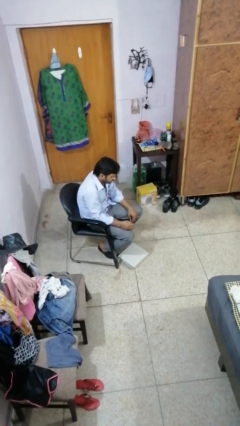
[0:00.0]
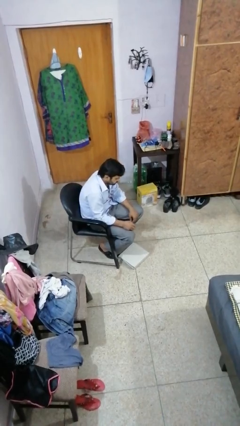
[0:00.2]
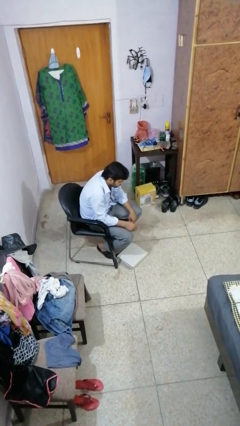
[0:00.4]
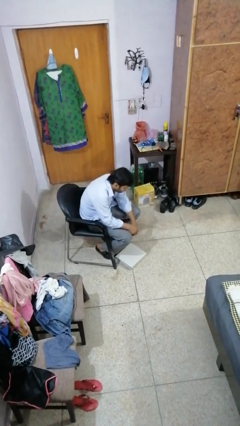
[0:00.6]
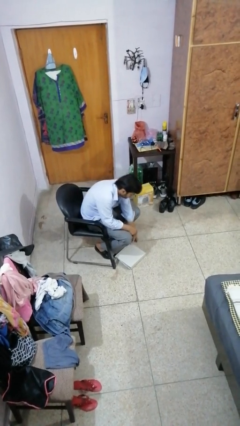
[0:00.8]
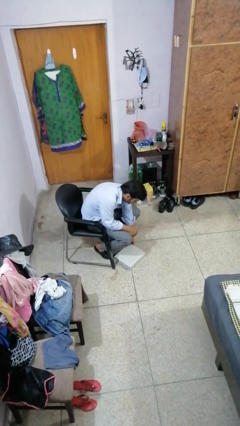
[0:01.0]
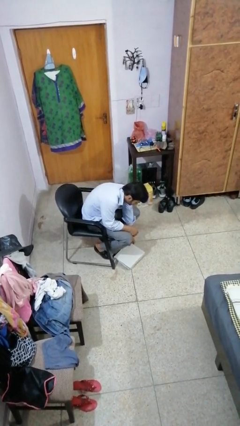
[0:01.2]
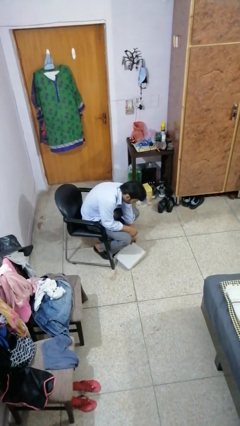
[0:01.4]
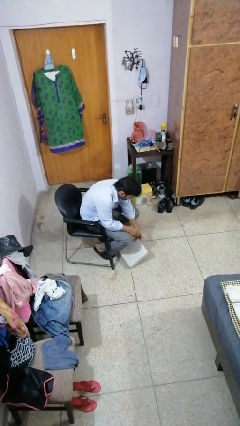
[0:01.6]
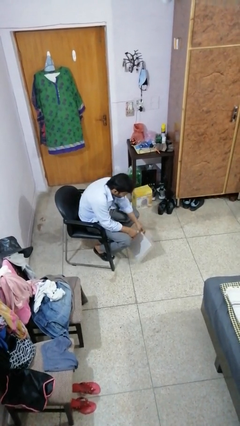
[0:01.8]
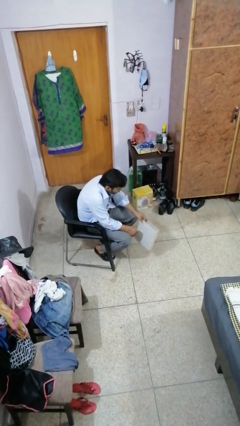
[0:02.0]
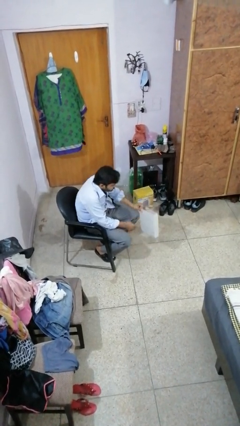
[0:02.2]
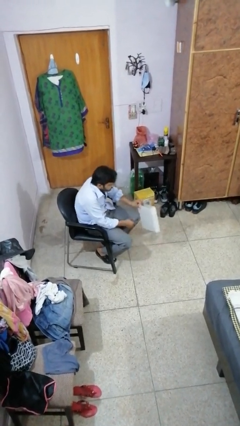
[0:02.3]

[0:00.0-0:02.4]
person picks up object from floor

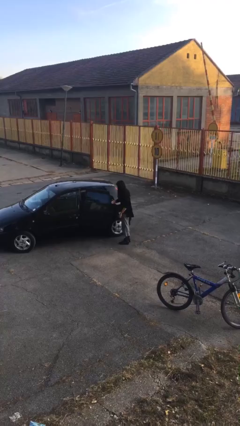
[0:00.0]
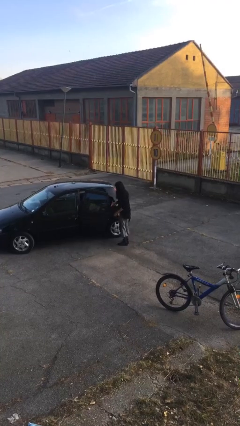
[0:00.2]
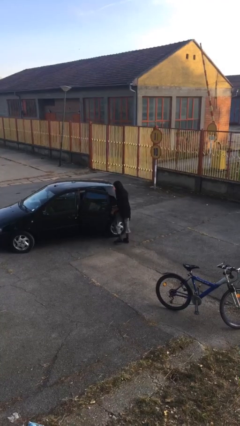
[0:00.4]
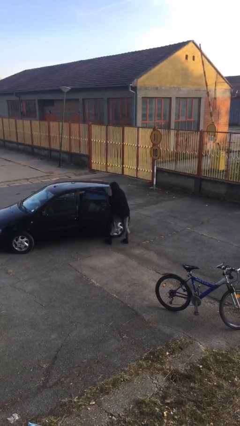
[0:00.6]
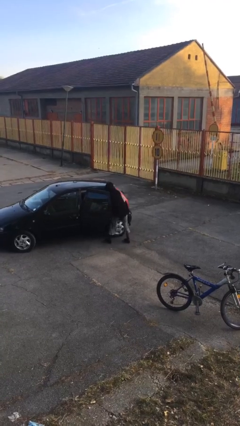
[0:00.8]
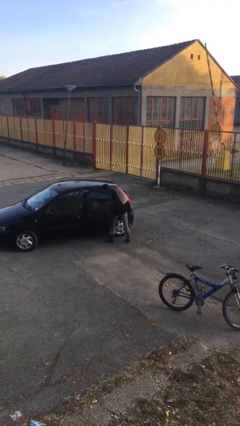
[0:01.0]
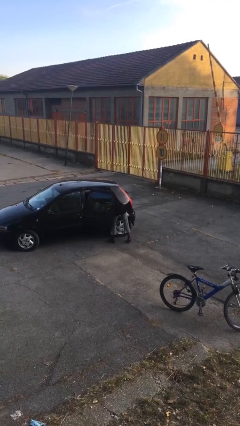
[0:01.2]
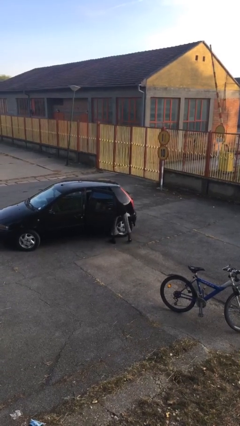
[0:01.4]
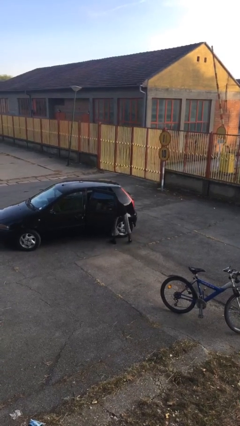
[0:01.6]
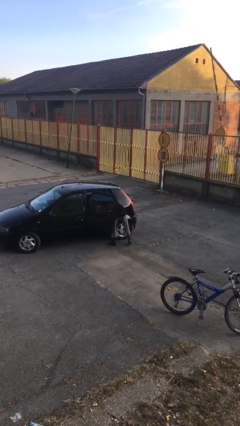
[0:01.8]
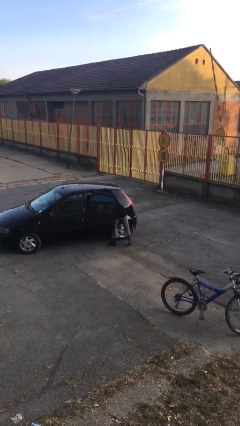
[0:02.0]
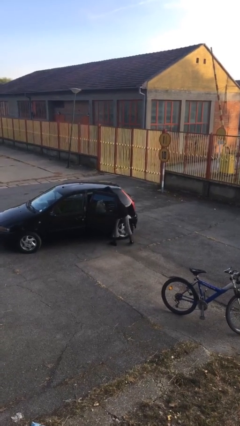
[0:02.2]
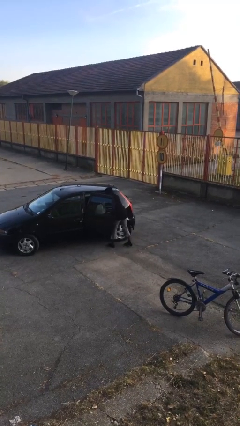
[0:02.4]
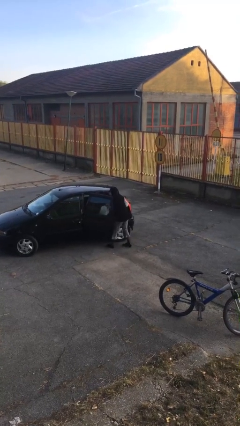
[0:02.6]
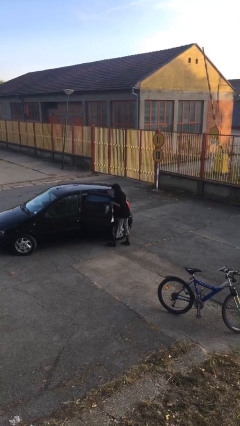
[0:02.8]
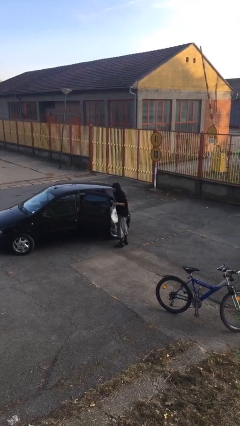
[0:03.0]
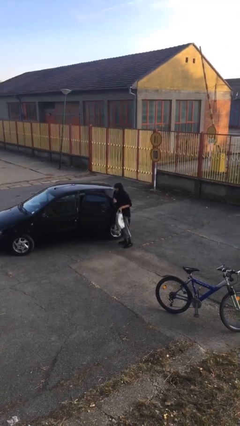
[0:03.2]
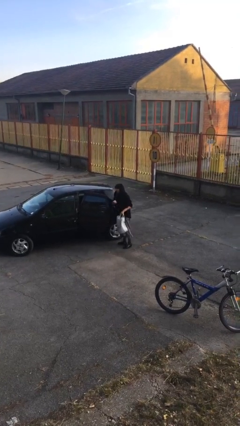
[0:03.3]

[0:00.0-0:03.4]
person unloads car

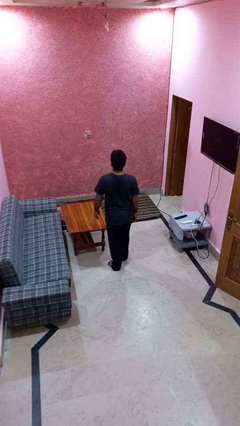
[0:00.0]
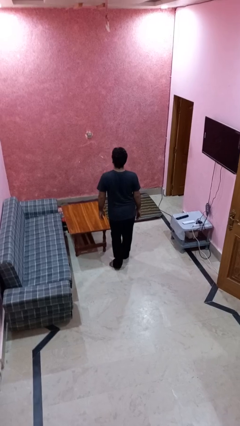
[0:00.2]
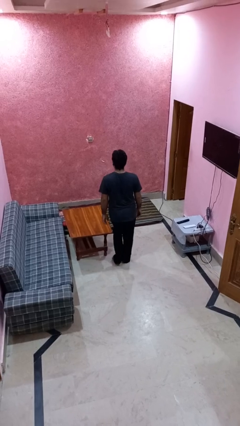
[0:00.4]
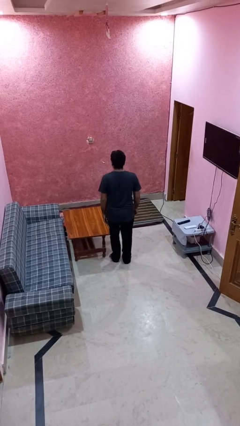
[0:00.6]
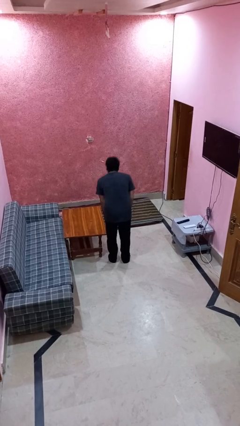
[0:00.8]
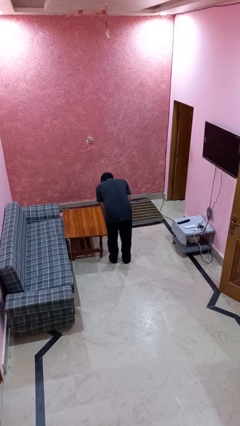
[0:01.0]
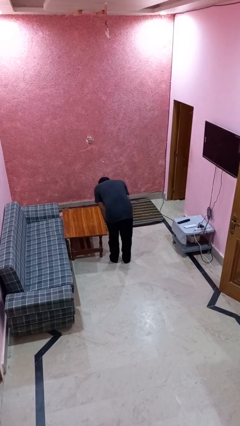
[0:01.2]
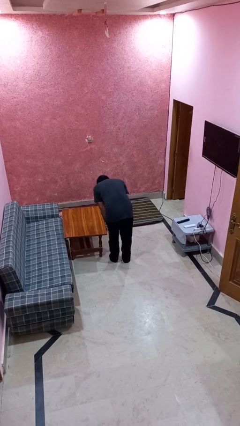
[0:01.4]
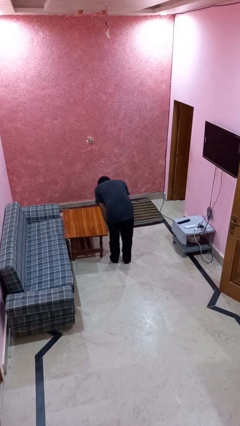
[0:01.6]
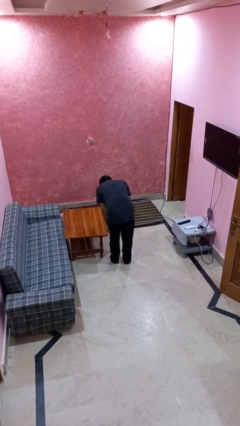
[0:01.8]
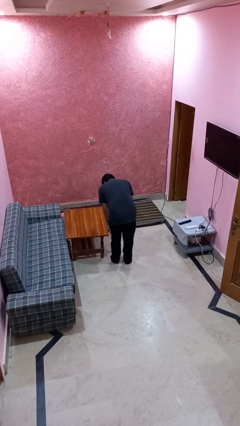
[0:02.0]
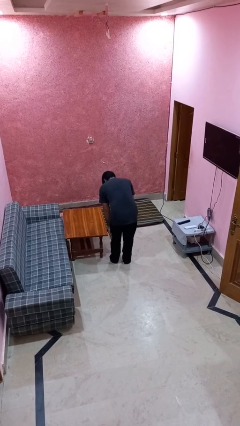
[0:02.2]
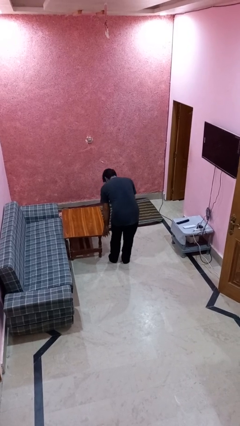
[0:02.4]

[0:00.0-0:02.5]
person bumps into table

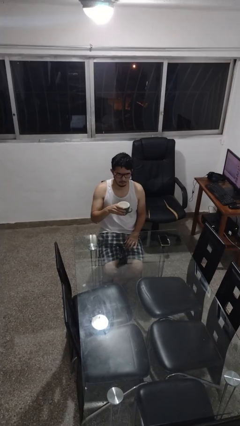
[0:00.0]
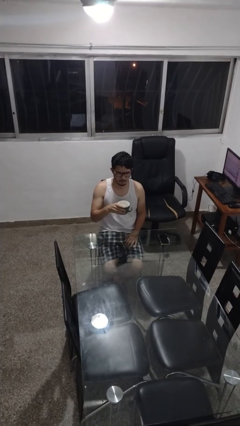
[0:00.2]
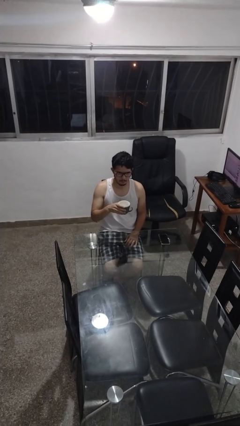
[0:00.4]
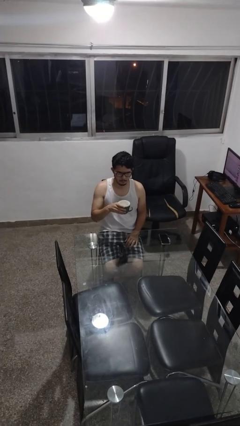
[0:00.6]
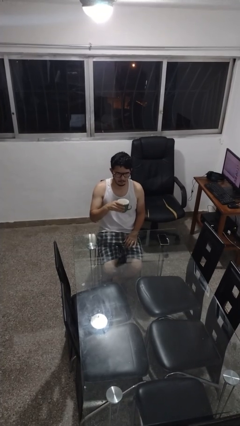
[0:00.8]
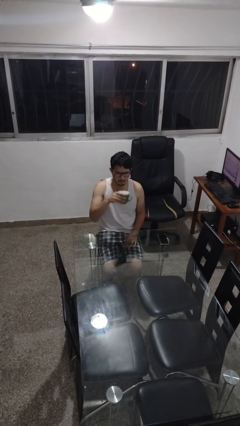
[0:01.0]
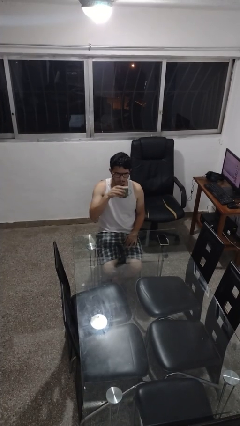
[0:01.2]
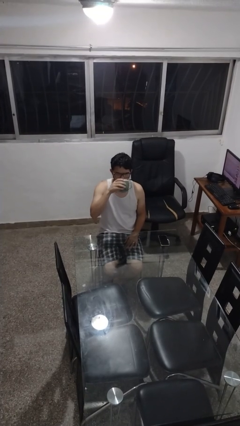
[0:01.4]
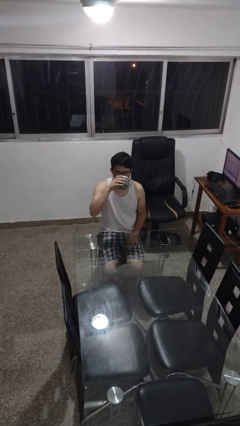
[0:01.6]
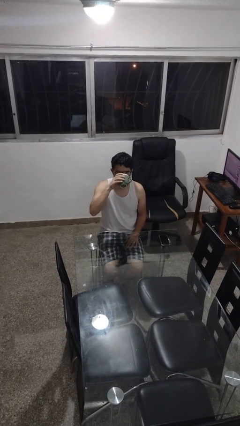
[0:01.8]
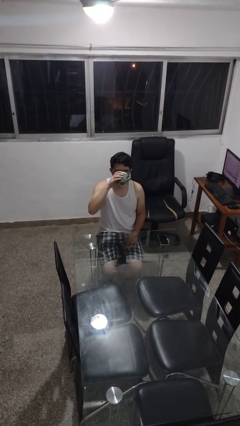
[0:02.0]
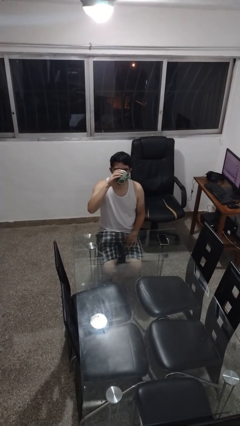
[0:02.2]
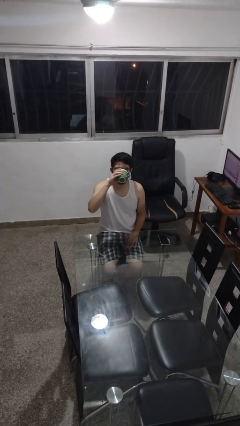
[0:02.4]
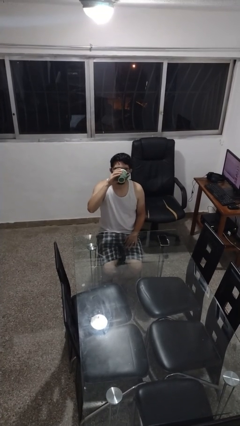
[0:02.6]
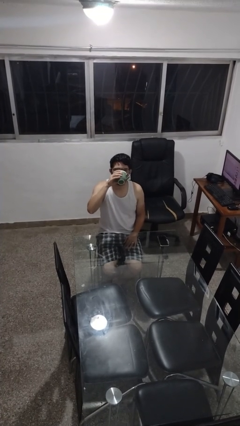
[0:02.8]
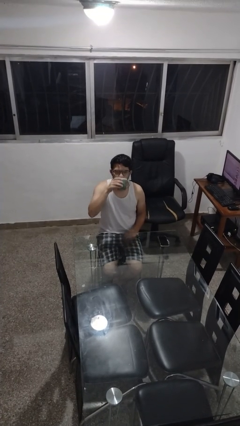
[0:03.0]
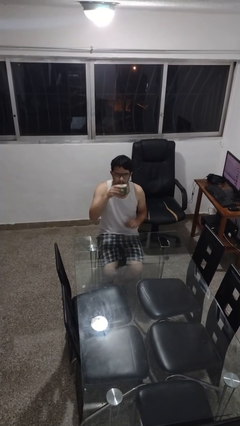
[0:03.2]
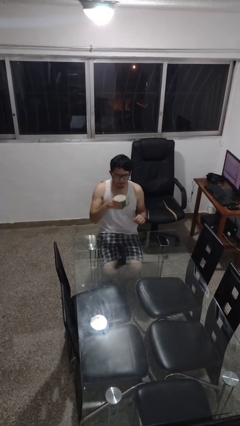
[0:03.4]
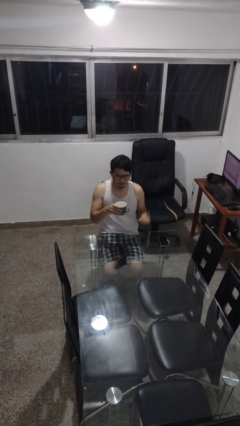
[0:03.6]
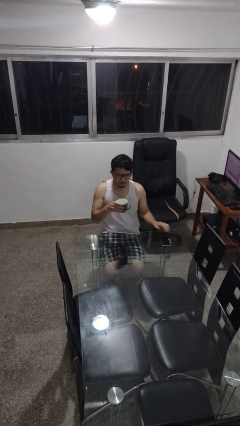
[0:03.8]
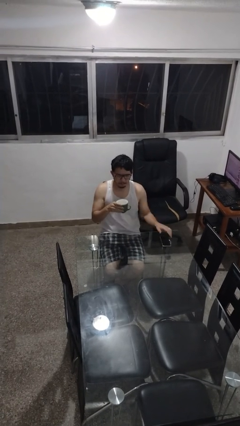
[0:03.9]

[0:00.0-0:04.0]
person drinks from mug

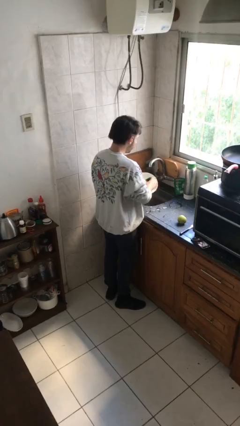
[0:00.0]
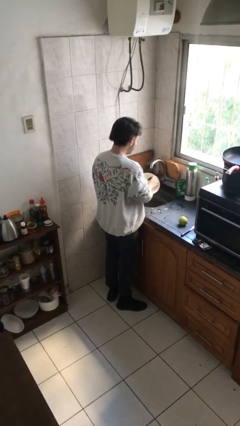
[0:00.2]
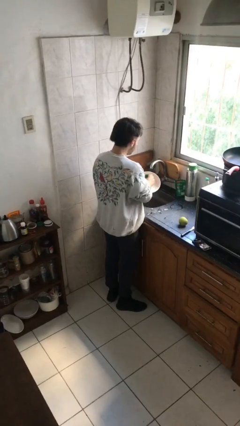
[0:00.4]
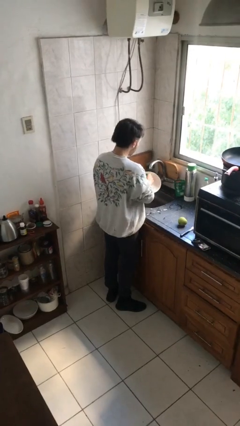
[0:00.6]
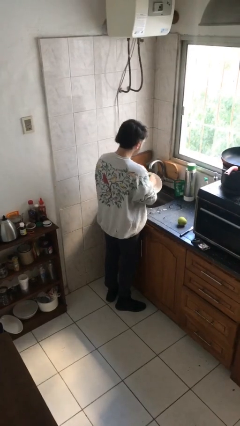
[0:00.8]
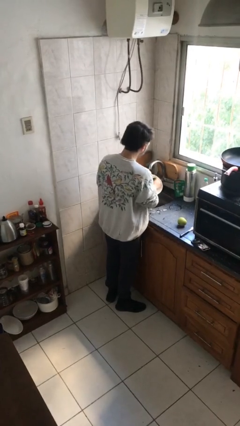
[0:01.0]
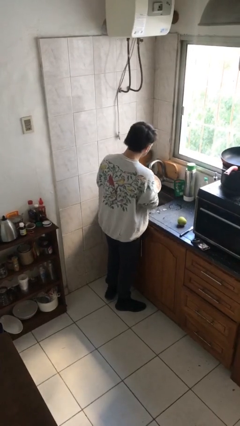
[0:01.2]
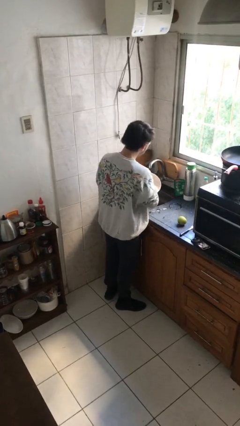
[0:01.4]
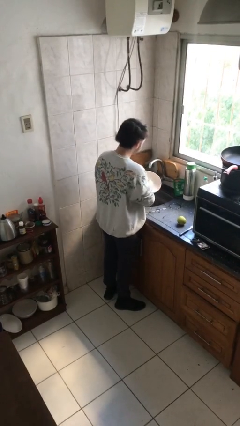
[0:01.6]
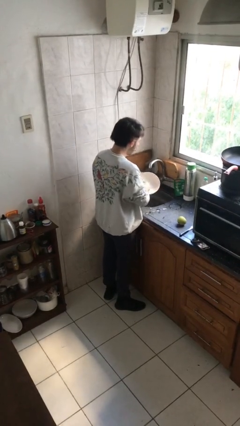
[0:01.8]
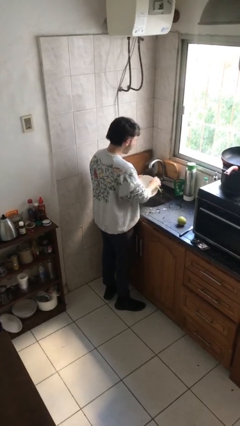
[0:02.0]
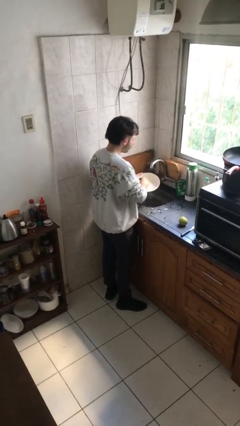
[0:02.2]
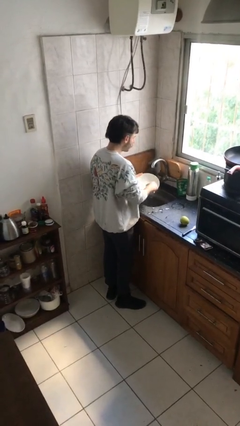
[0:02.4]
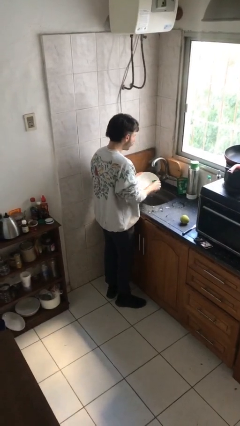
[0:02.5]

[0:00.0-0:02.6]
person washes dish

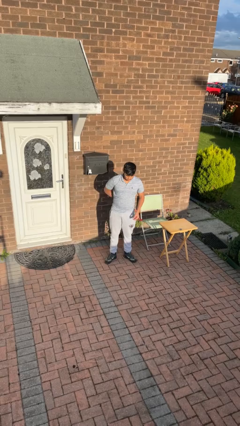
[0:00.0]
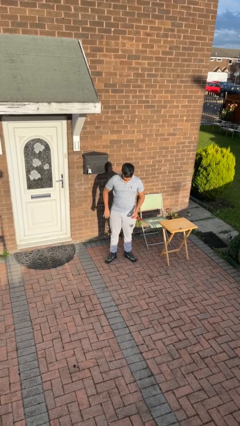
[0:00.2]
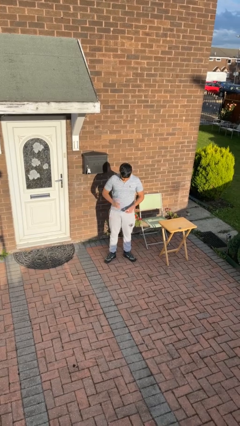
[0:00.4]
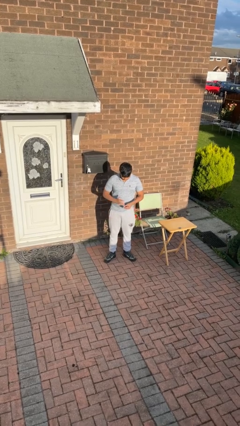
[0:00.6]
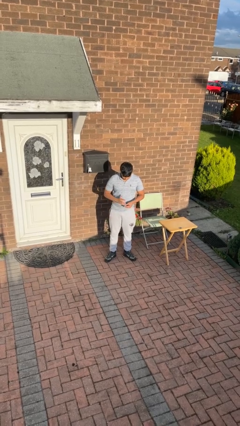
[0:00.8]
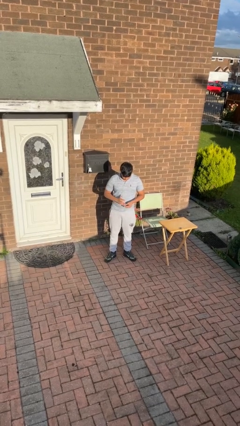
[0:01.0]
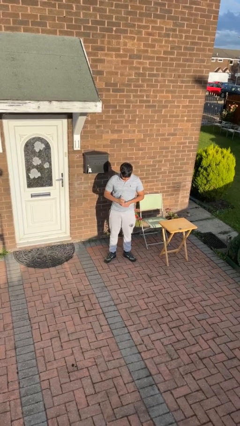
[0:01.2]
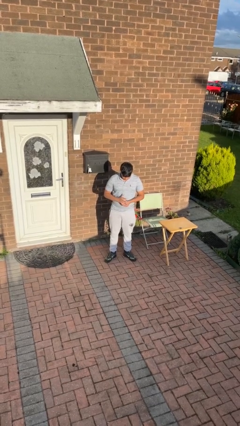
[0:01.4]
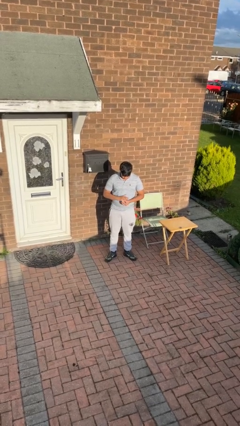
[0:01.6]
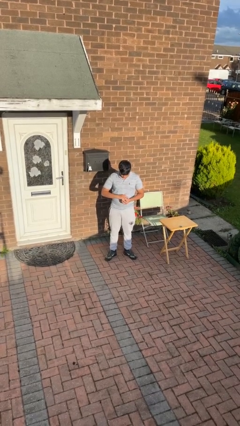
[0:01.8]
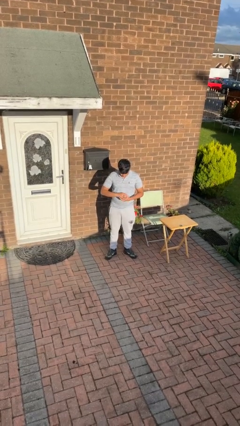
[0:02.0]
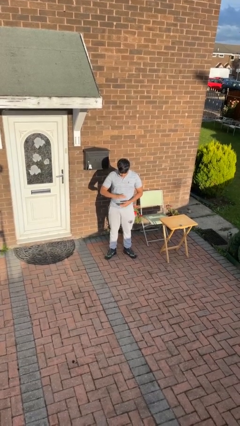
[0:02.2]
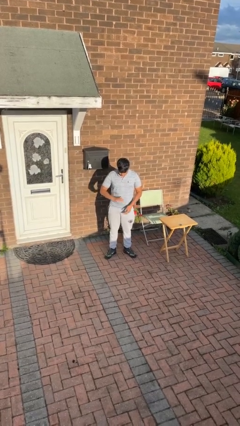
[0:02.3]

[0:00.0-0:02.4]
person puts on ring

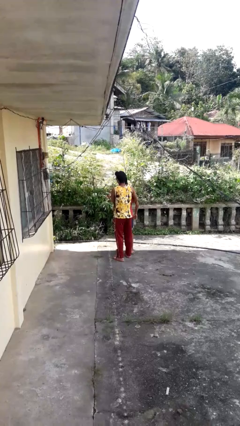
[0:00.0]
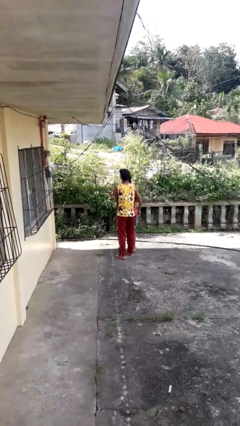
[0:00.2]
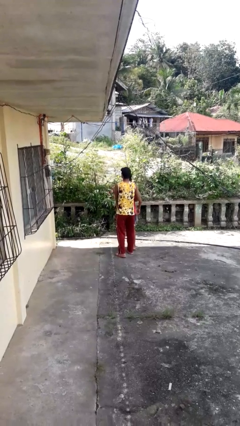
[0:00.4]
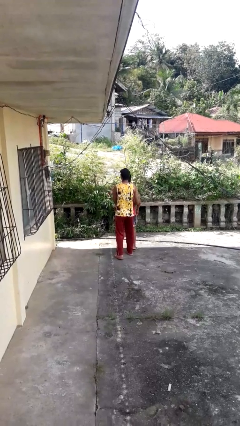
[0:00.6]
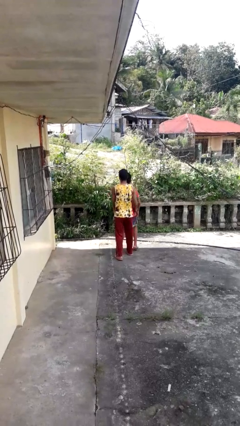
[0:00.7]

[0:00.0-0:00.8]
person puts down person
